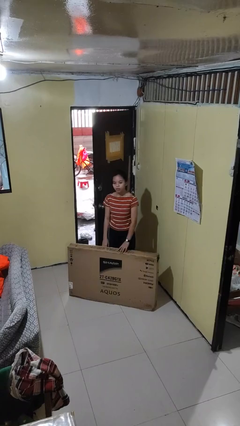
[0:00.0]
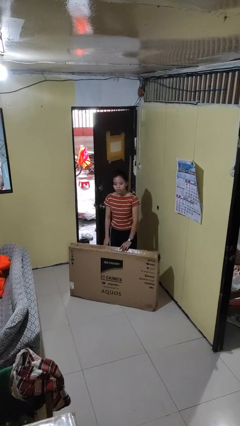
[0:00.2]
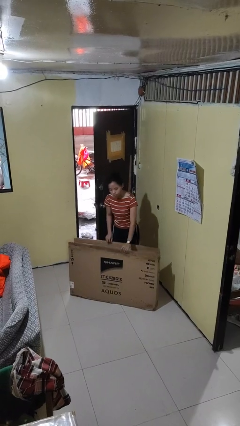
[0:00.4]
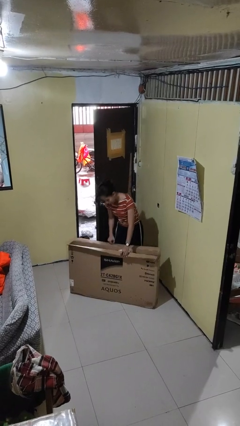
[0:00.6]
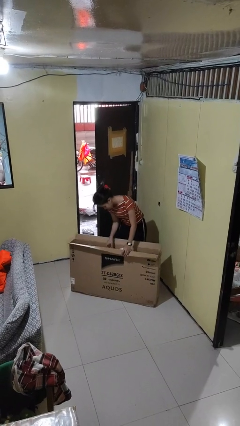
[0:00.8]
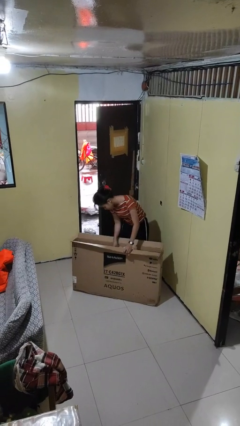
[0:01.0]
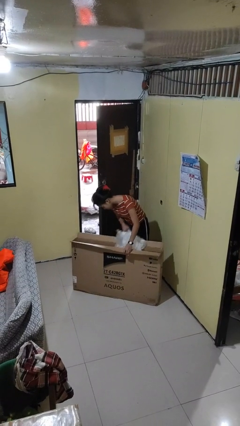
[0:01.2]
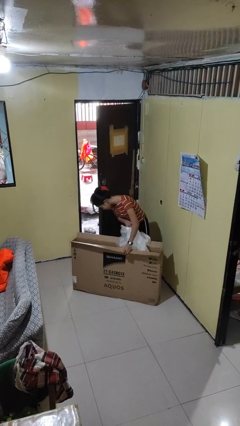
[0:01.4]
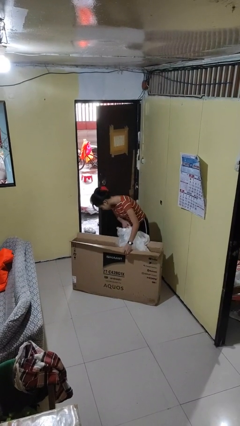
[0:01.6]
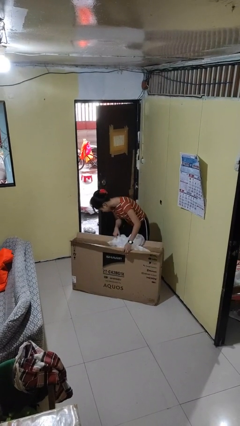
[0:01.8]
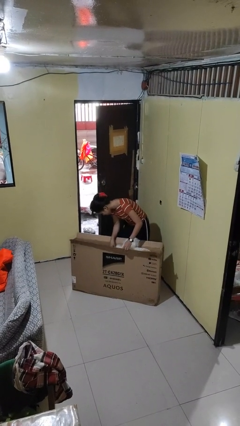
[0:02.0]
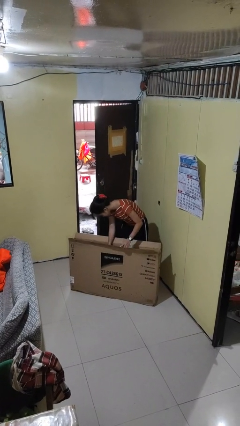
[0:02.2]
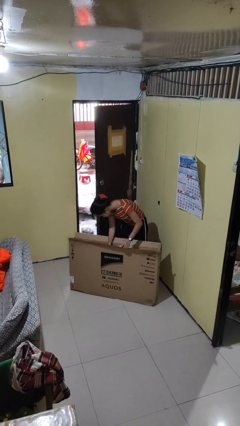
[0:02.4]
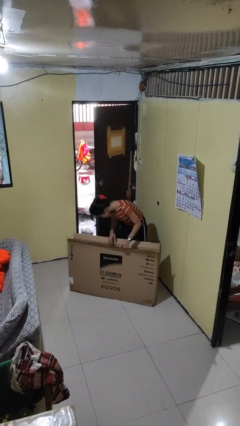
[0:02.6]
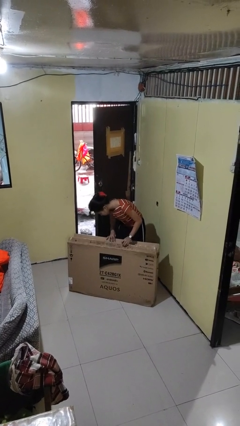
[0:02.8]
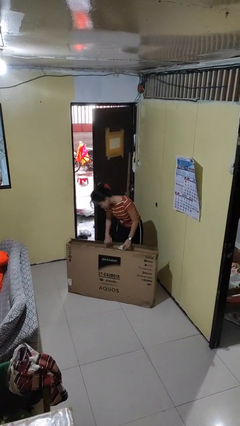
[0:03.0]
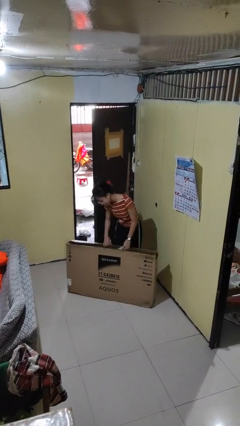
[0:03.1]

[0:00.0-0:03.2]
person searches in box

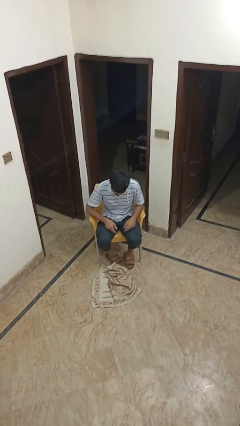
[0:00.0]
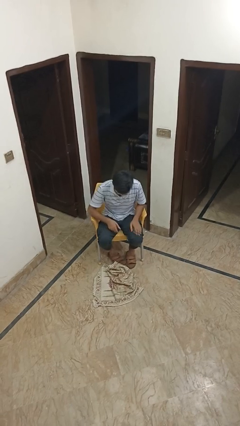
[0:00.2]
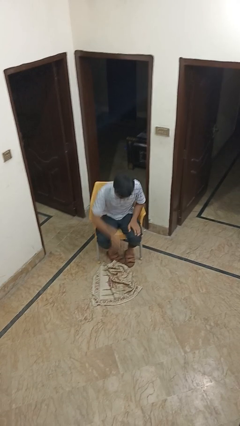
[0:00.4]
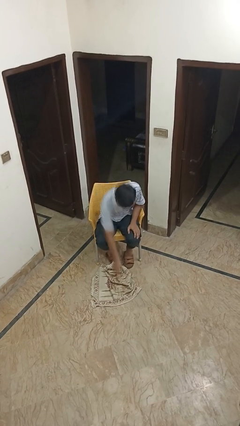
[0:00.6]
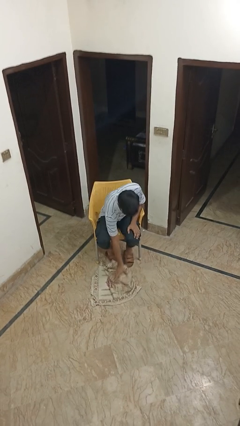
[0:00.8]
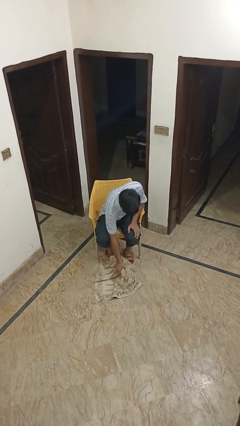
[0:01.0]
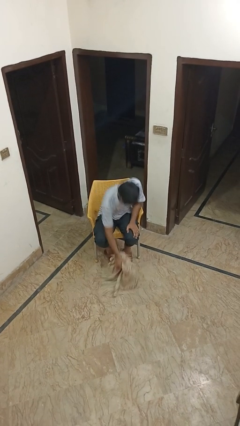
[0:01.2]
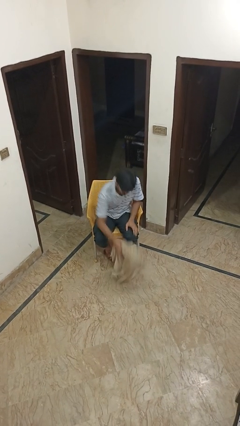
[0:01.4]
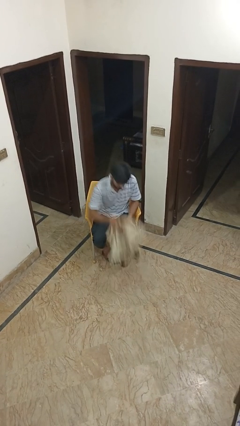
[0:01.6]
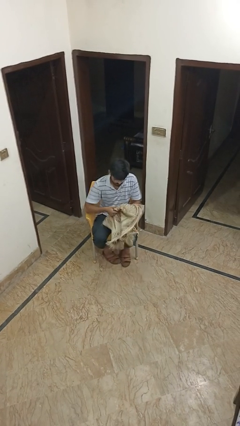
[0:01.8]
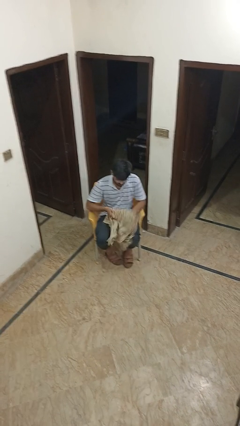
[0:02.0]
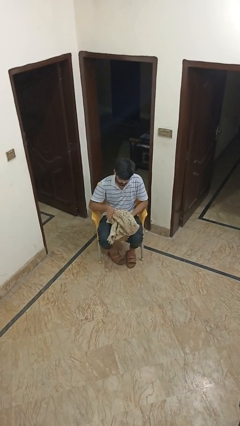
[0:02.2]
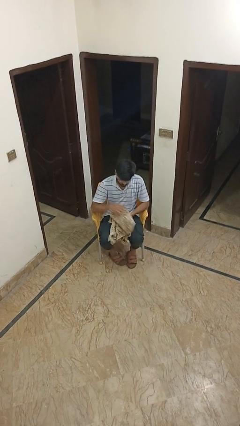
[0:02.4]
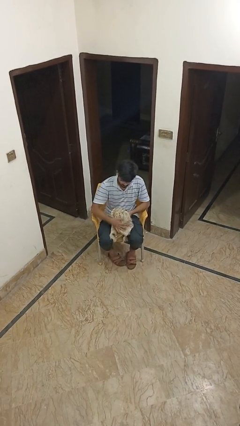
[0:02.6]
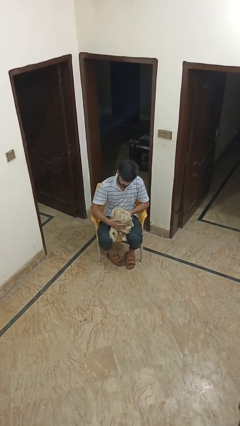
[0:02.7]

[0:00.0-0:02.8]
person picks up object from floor

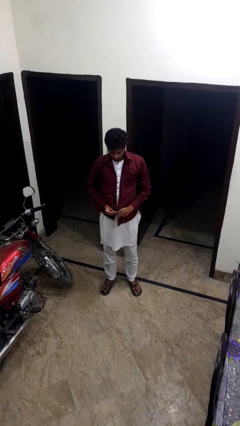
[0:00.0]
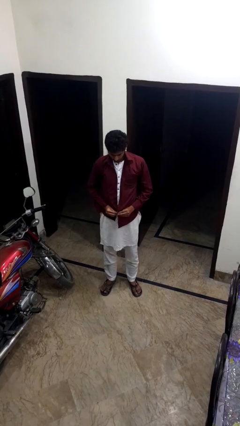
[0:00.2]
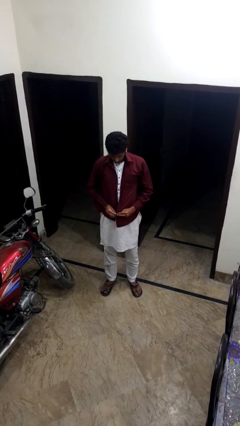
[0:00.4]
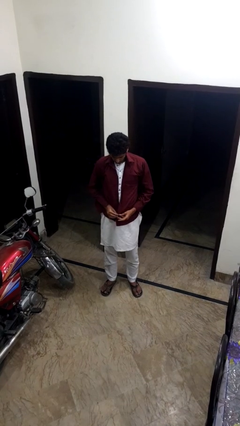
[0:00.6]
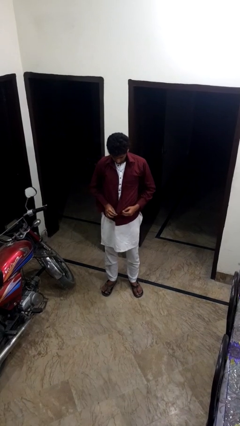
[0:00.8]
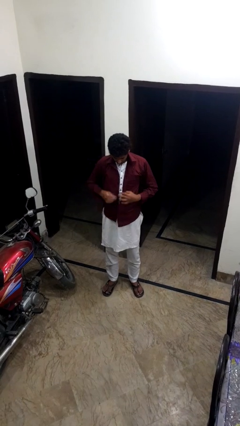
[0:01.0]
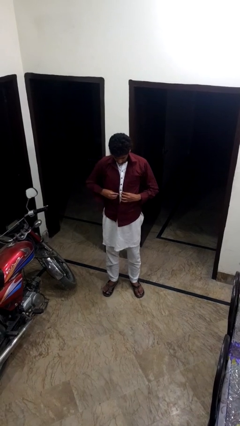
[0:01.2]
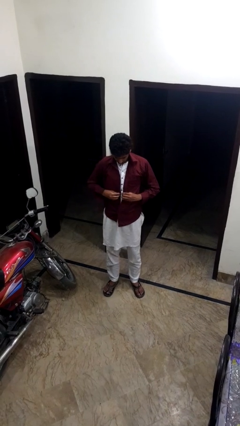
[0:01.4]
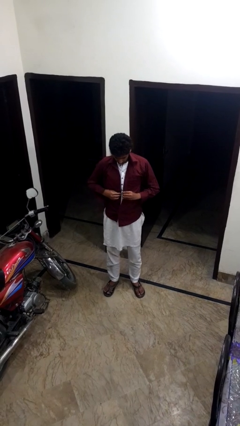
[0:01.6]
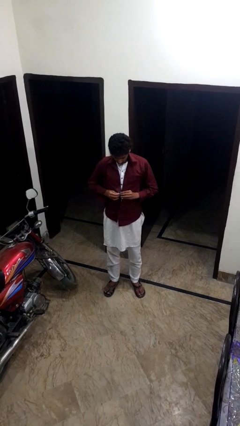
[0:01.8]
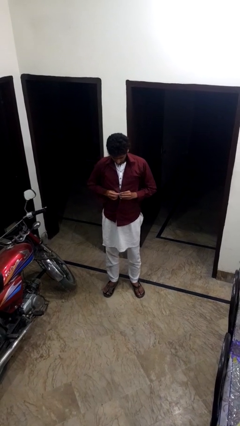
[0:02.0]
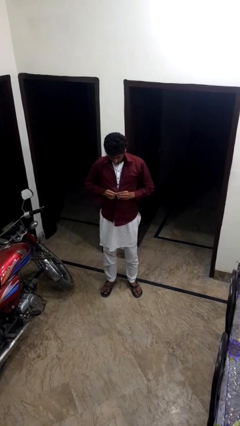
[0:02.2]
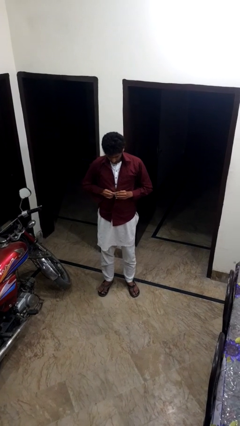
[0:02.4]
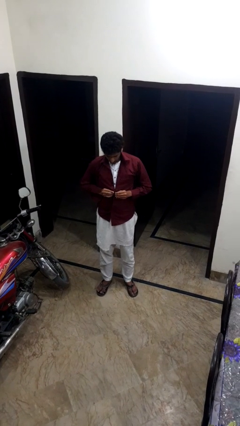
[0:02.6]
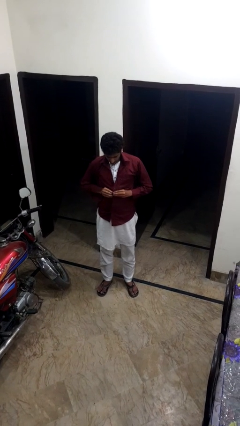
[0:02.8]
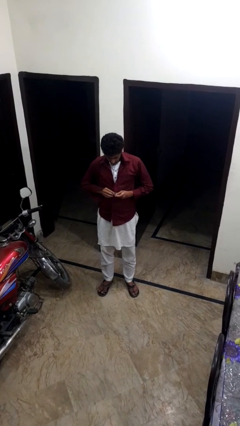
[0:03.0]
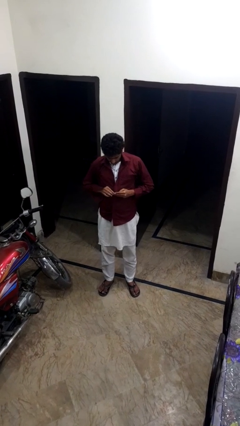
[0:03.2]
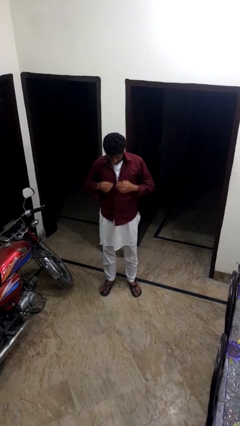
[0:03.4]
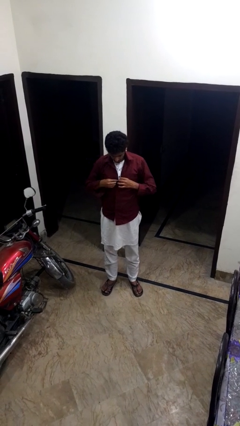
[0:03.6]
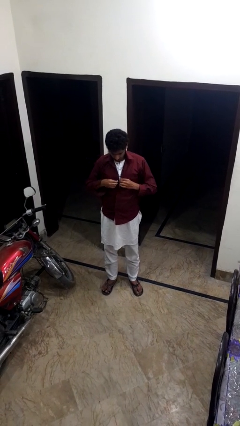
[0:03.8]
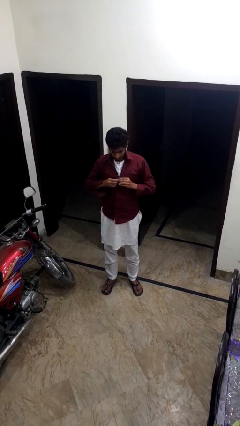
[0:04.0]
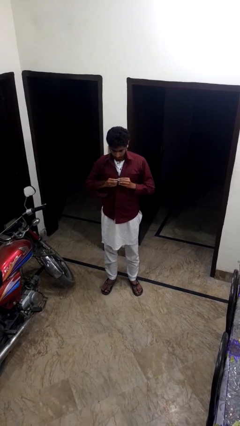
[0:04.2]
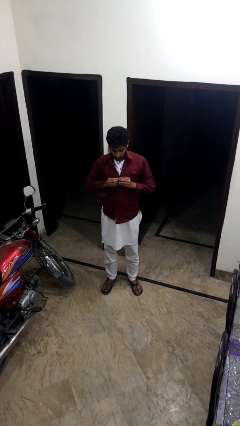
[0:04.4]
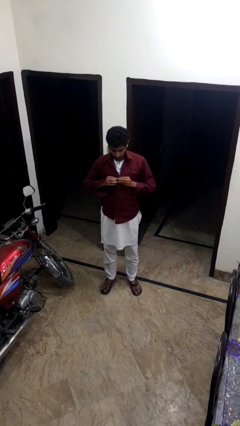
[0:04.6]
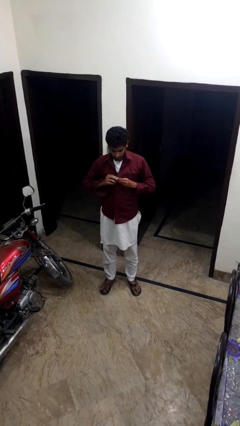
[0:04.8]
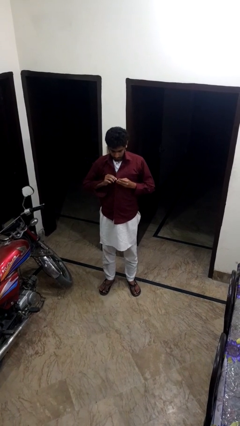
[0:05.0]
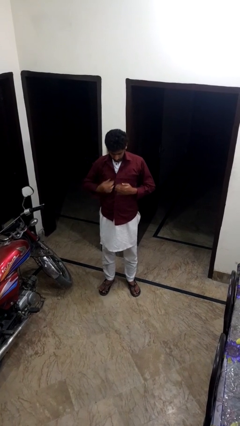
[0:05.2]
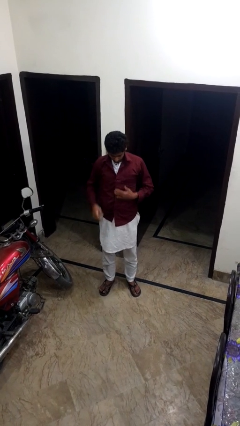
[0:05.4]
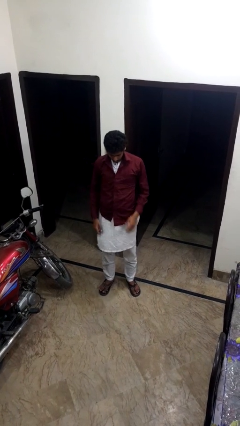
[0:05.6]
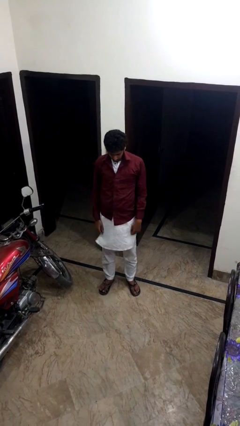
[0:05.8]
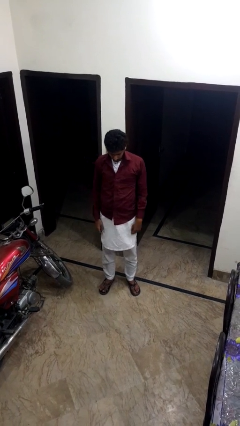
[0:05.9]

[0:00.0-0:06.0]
person buttons shirt

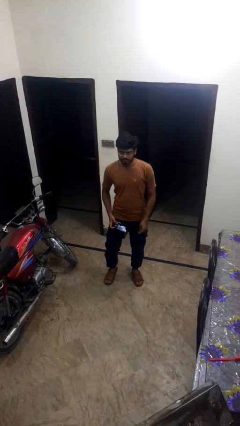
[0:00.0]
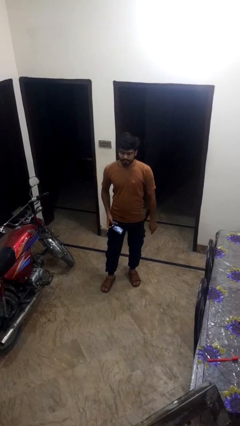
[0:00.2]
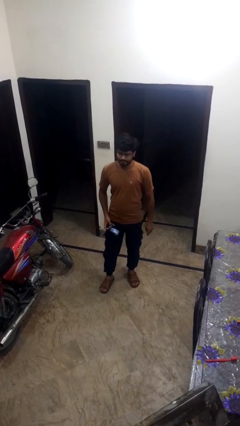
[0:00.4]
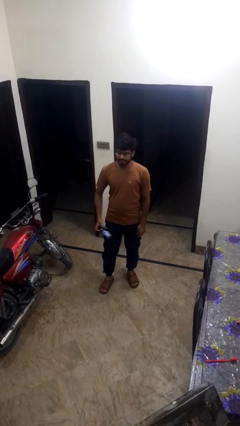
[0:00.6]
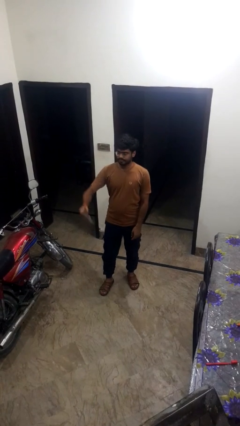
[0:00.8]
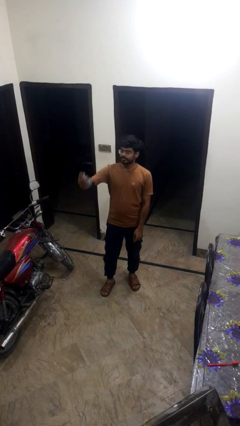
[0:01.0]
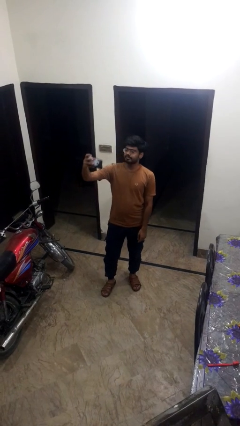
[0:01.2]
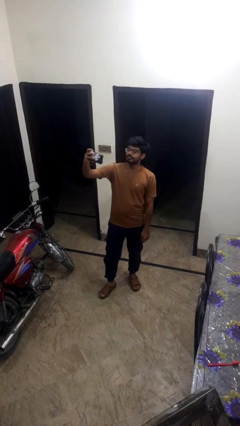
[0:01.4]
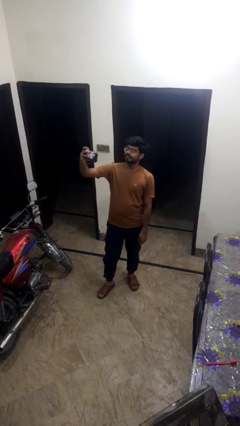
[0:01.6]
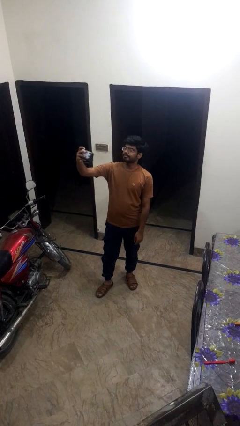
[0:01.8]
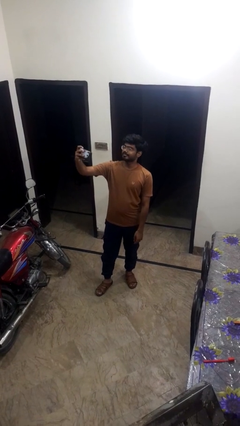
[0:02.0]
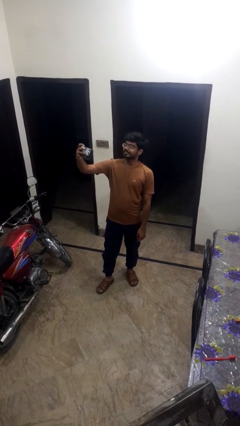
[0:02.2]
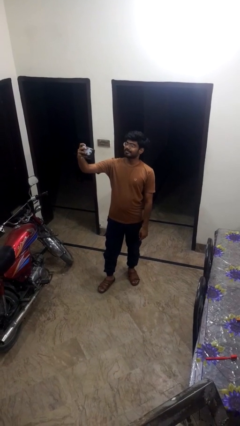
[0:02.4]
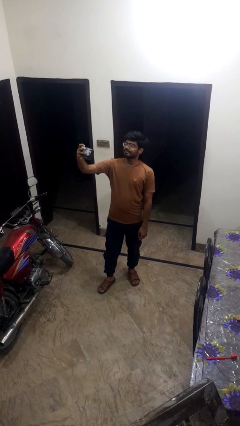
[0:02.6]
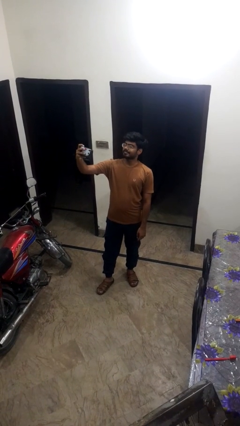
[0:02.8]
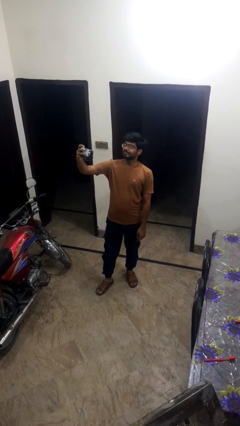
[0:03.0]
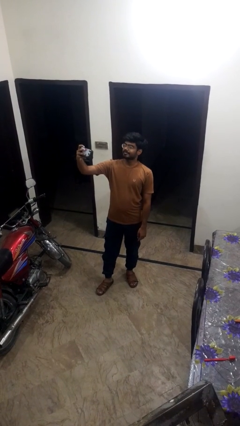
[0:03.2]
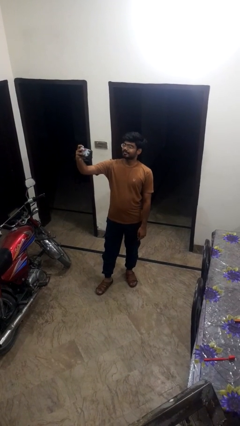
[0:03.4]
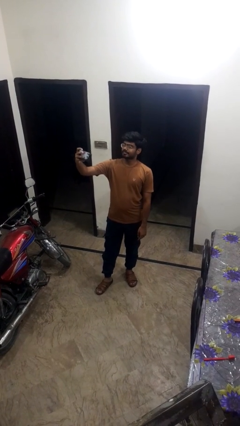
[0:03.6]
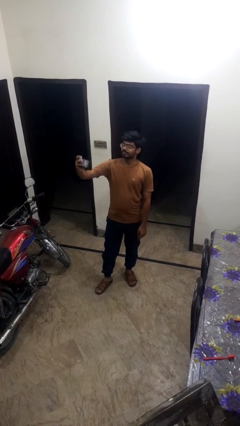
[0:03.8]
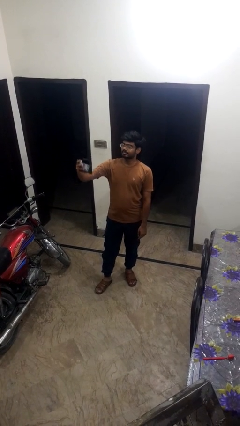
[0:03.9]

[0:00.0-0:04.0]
person takes selfie

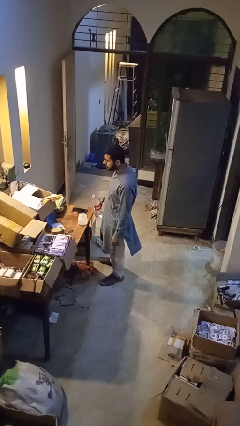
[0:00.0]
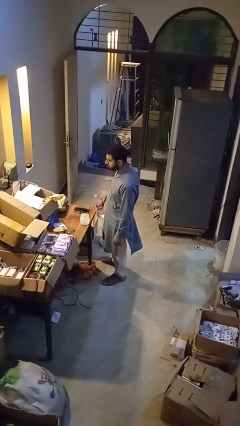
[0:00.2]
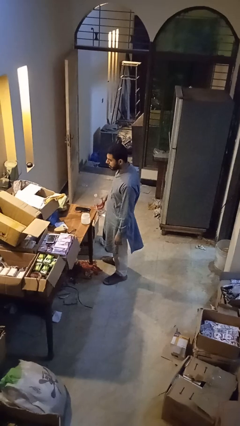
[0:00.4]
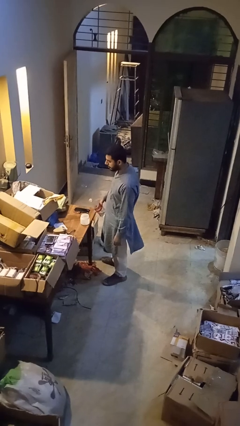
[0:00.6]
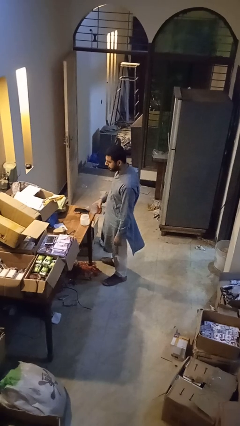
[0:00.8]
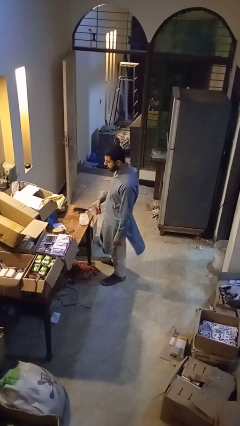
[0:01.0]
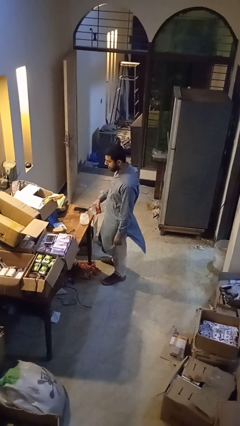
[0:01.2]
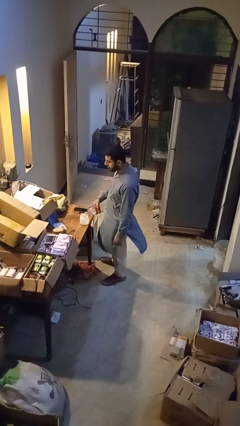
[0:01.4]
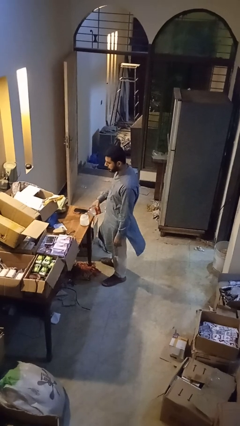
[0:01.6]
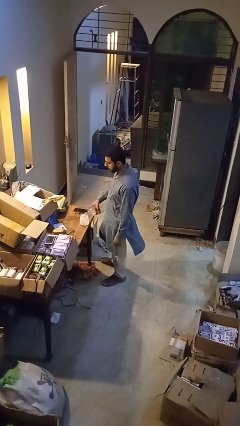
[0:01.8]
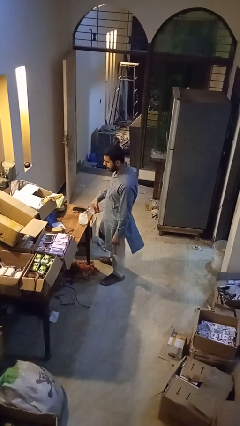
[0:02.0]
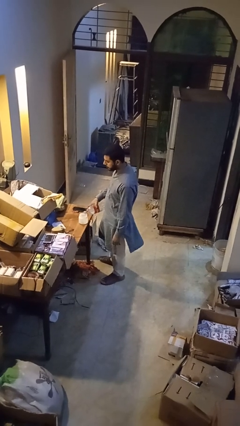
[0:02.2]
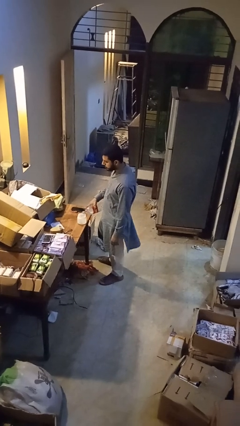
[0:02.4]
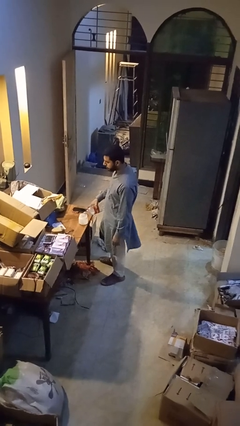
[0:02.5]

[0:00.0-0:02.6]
person pours liquid into cup
